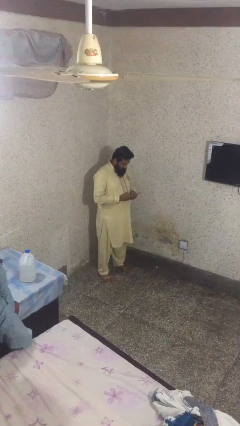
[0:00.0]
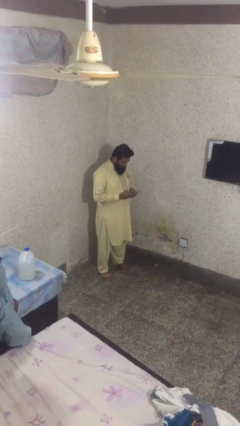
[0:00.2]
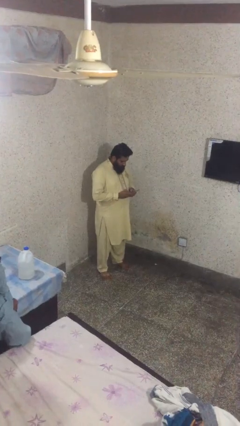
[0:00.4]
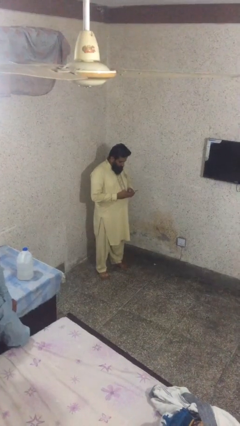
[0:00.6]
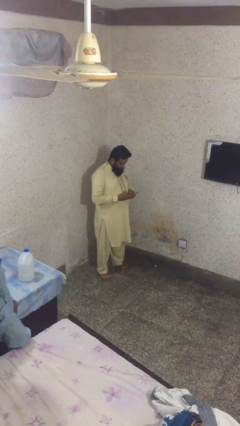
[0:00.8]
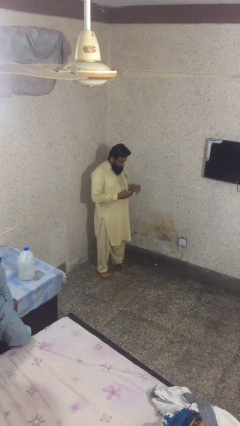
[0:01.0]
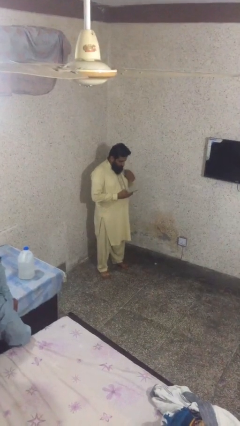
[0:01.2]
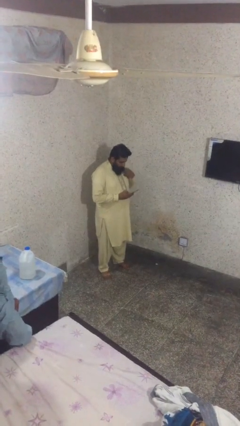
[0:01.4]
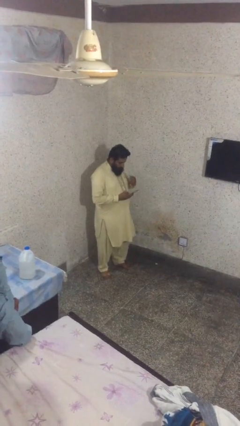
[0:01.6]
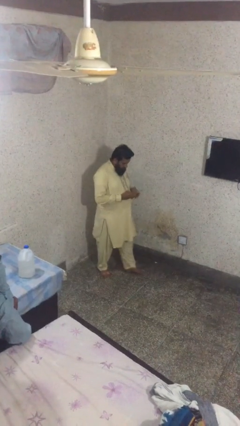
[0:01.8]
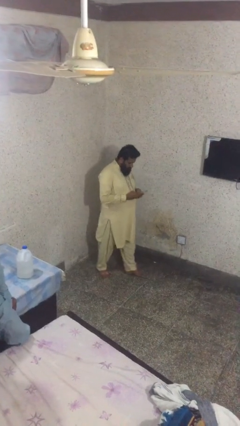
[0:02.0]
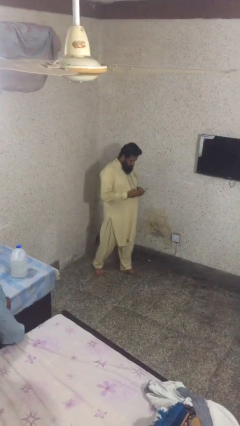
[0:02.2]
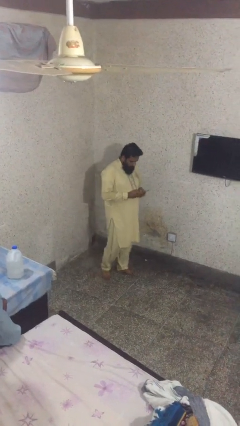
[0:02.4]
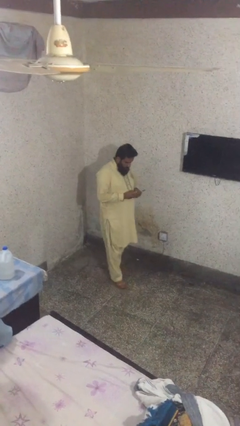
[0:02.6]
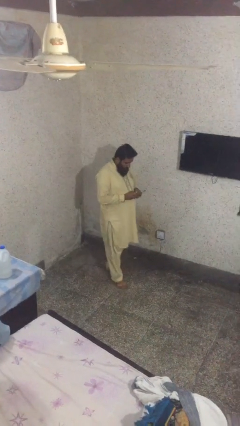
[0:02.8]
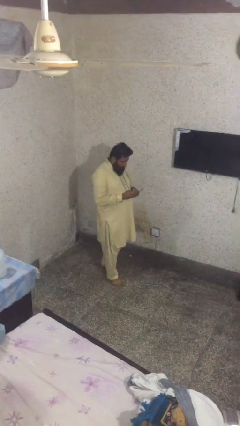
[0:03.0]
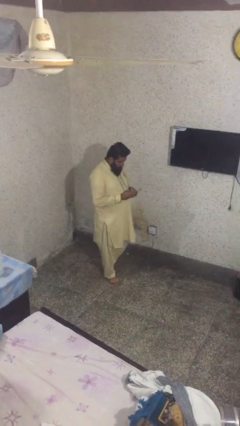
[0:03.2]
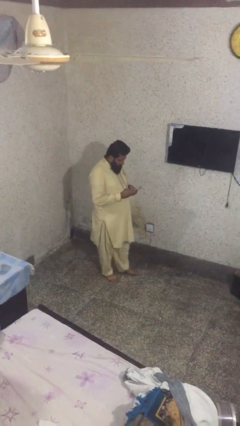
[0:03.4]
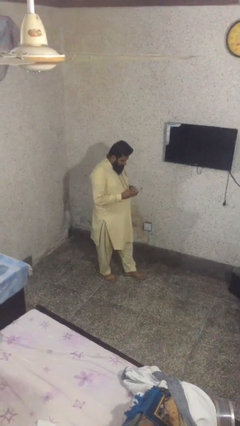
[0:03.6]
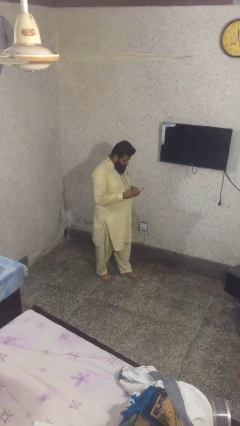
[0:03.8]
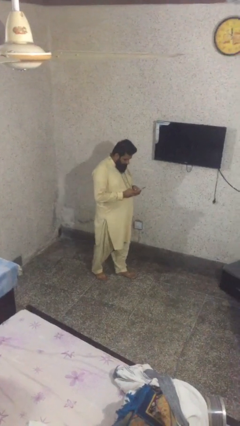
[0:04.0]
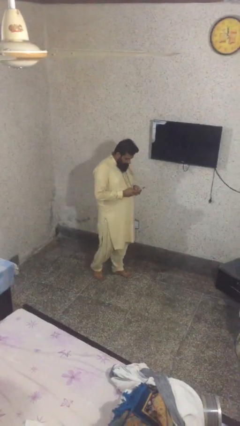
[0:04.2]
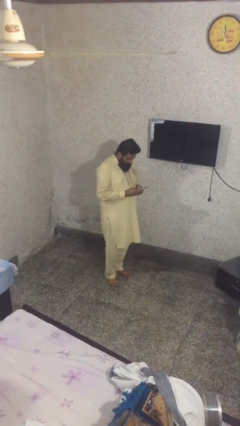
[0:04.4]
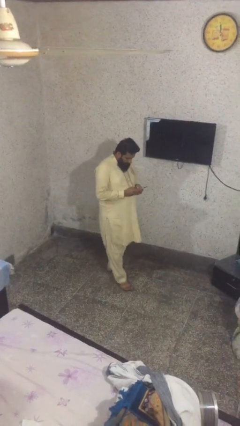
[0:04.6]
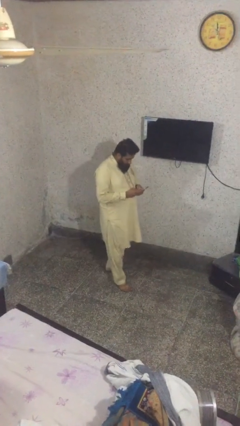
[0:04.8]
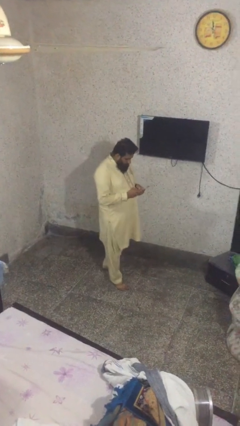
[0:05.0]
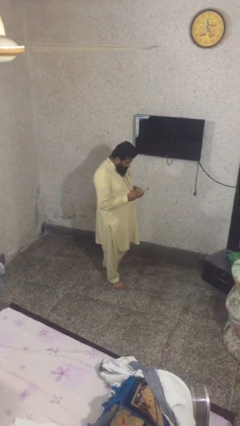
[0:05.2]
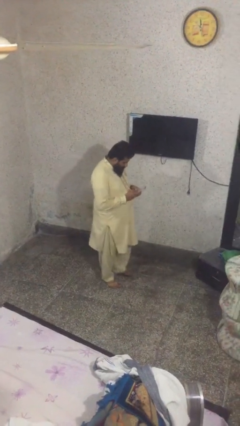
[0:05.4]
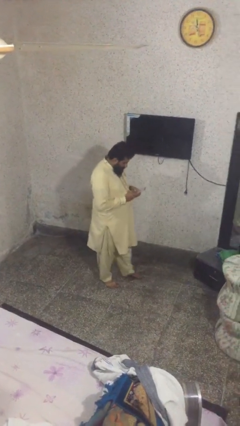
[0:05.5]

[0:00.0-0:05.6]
person texts on phone

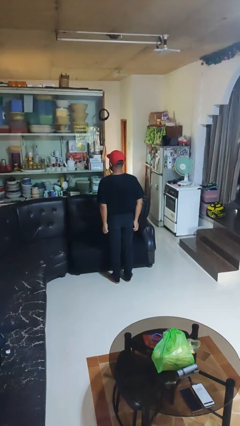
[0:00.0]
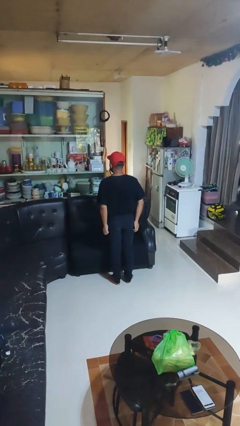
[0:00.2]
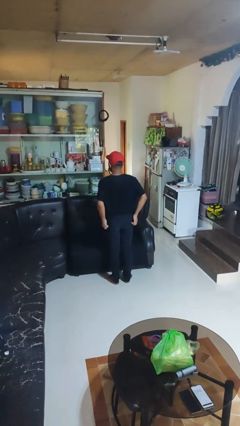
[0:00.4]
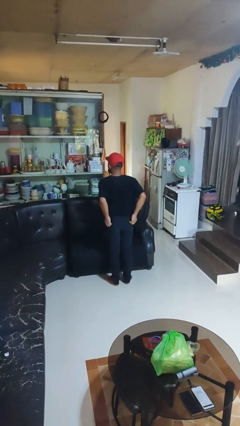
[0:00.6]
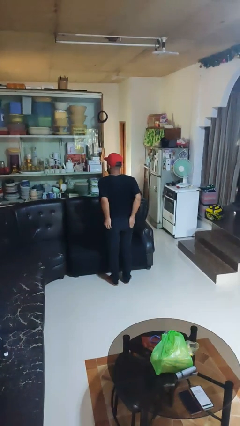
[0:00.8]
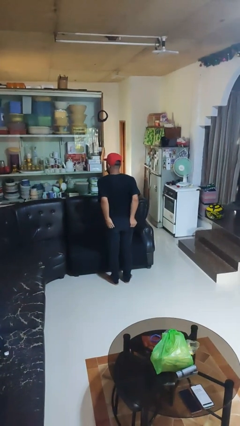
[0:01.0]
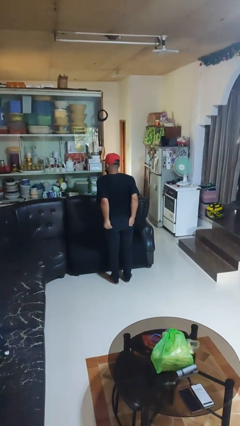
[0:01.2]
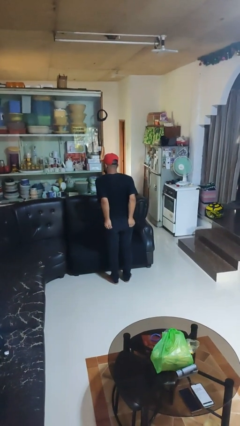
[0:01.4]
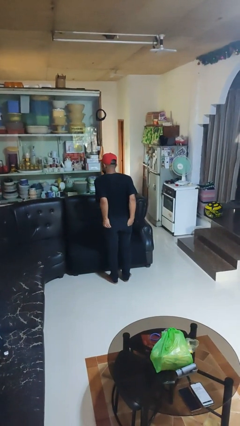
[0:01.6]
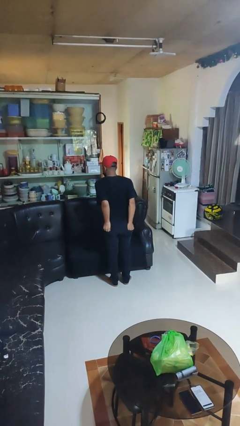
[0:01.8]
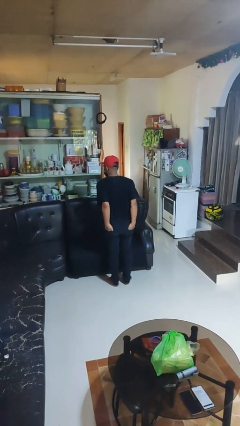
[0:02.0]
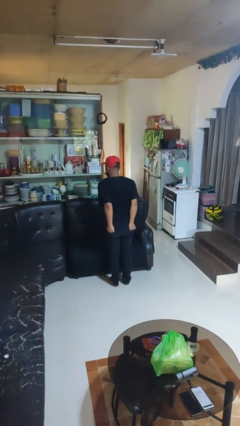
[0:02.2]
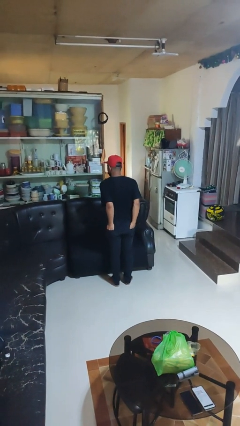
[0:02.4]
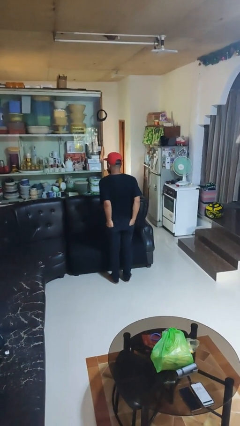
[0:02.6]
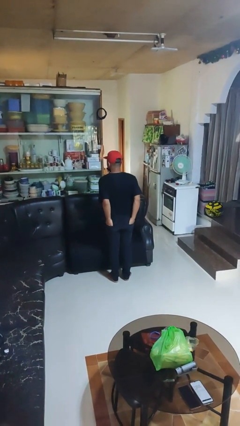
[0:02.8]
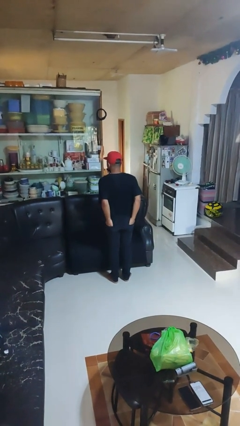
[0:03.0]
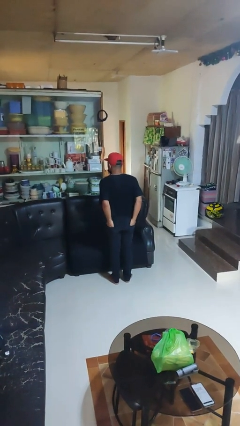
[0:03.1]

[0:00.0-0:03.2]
person puts hands in back pockets

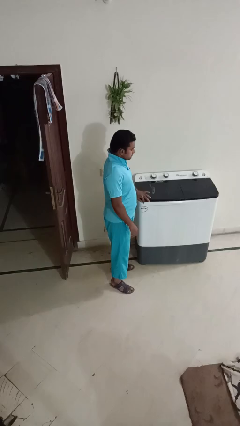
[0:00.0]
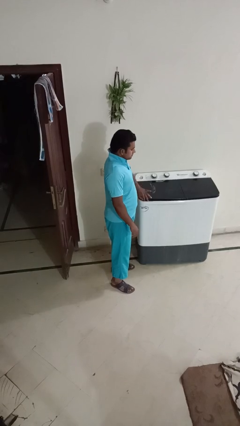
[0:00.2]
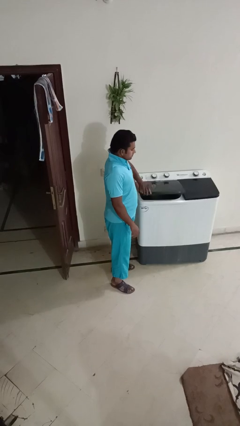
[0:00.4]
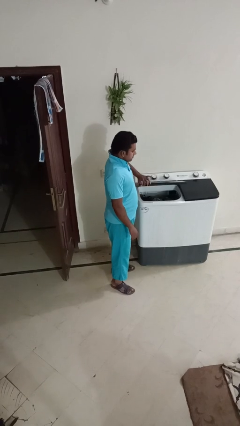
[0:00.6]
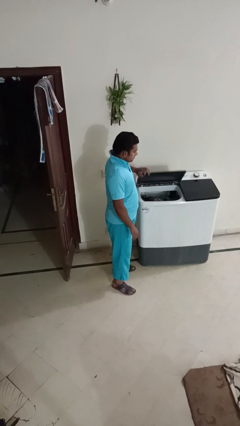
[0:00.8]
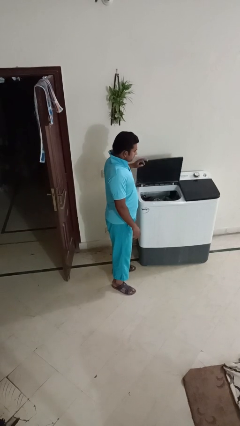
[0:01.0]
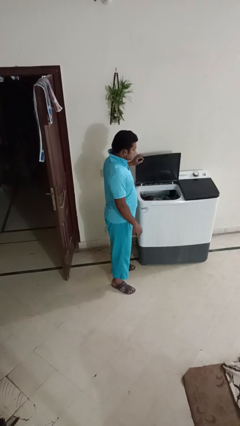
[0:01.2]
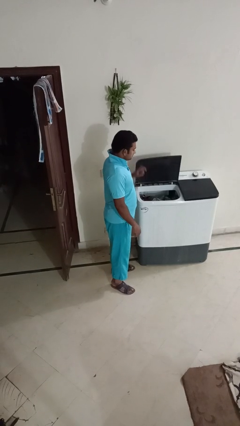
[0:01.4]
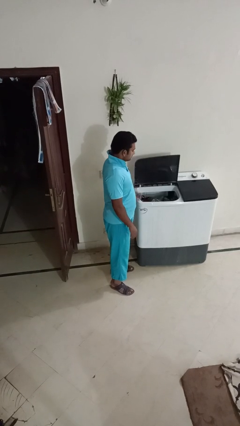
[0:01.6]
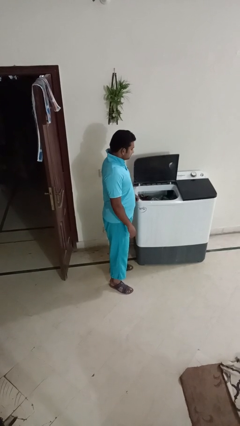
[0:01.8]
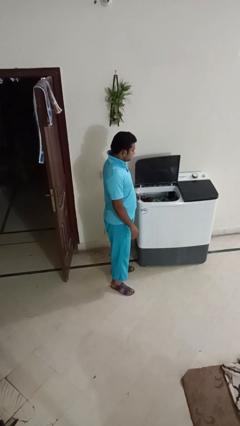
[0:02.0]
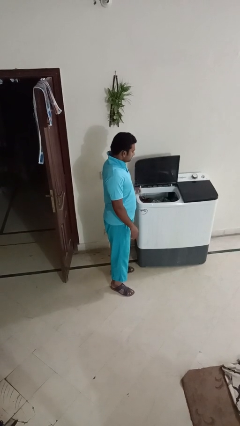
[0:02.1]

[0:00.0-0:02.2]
person opens clothes washer

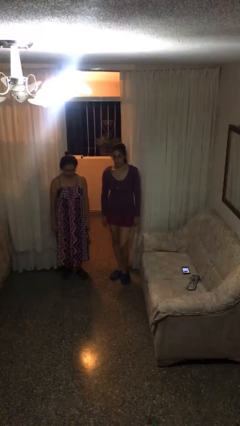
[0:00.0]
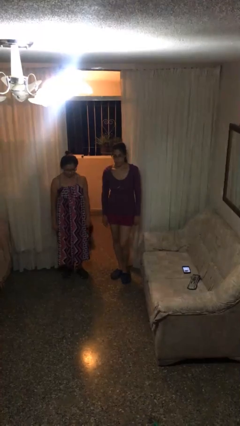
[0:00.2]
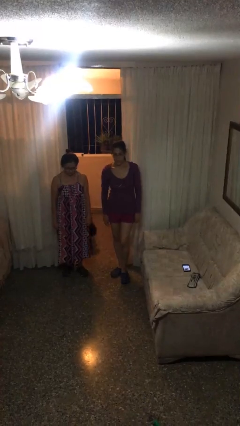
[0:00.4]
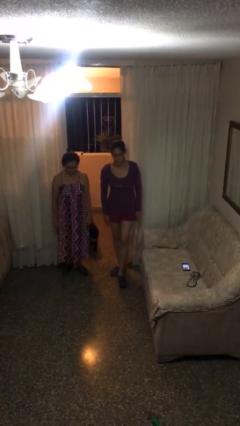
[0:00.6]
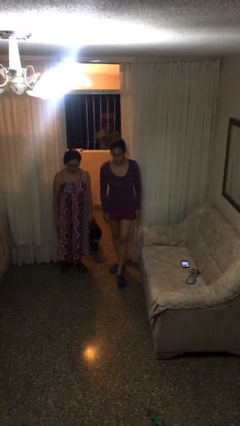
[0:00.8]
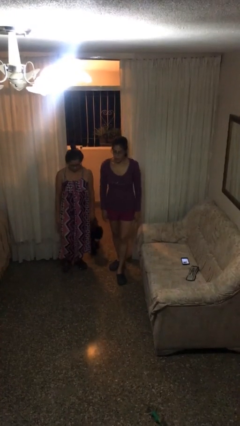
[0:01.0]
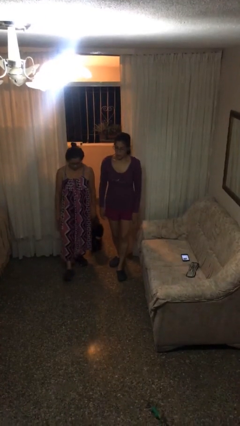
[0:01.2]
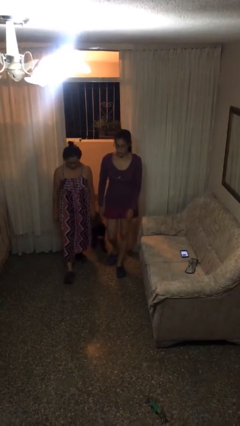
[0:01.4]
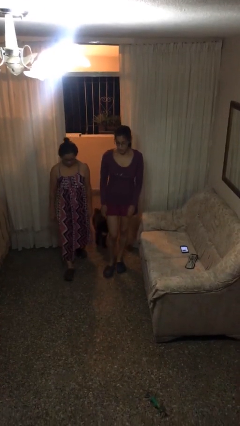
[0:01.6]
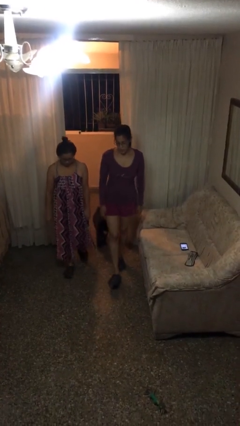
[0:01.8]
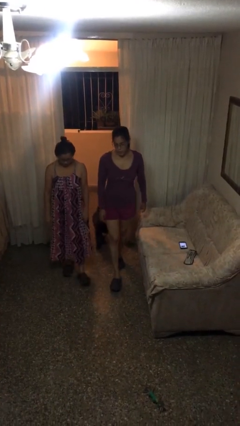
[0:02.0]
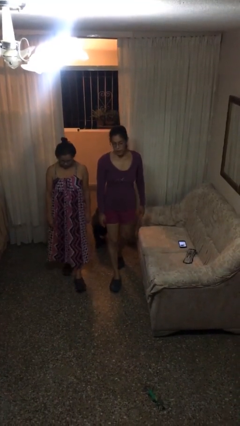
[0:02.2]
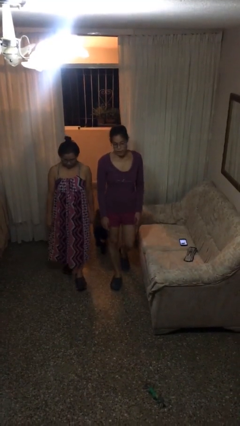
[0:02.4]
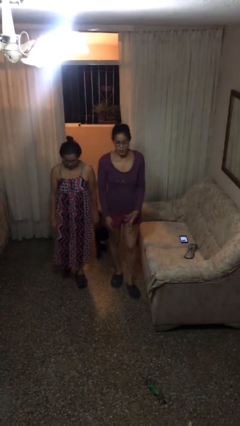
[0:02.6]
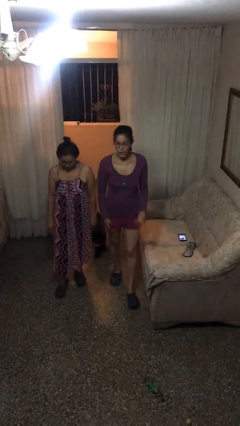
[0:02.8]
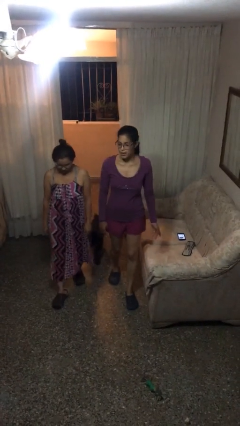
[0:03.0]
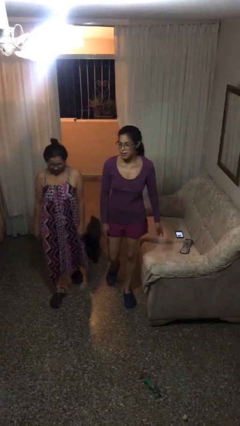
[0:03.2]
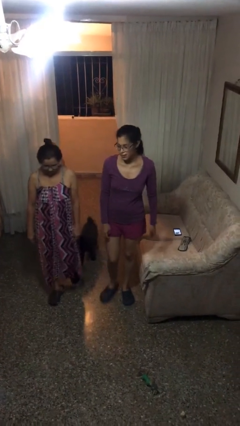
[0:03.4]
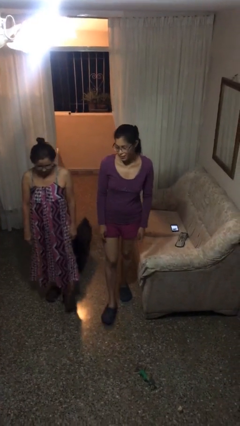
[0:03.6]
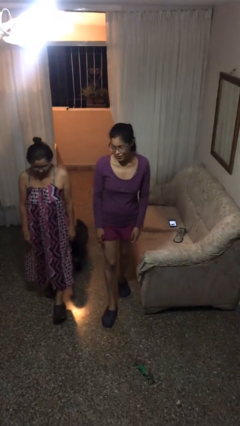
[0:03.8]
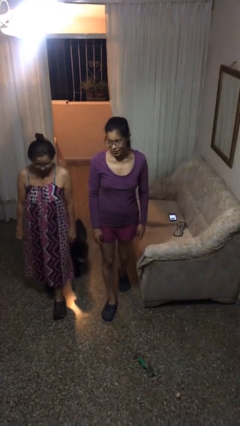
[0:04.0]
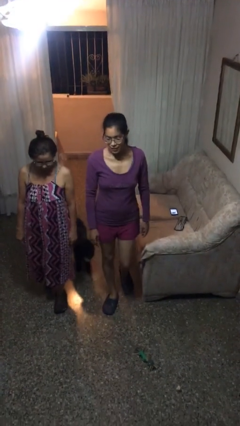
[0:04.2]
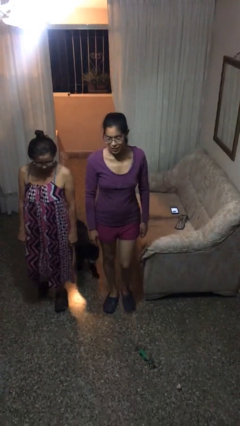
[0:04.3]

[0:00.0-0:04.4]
person talks to person

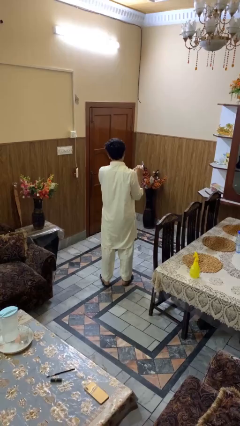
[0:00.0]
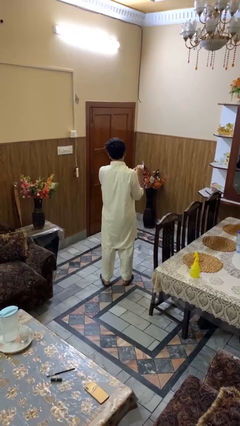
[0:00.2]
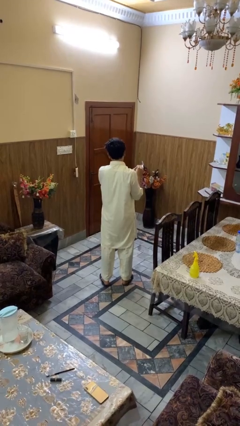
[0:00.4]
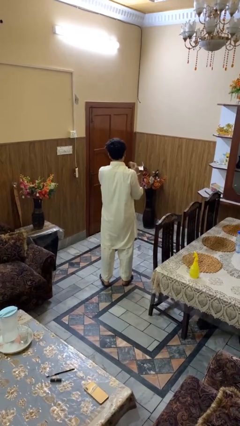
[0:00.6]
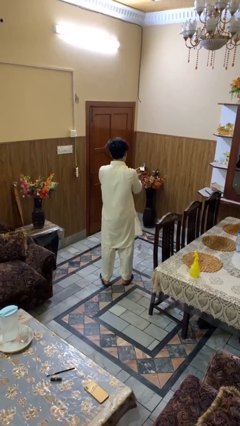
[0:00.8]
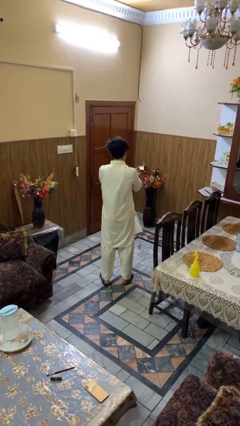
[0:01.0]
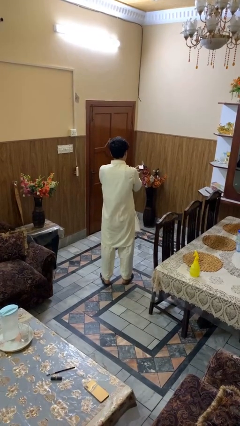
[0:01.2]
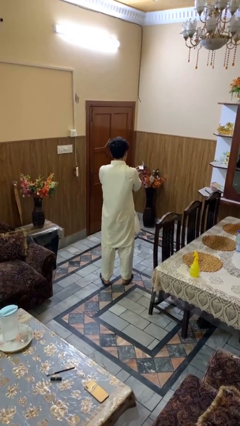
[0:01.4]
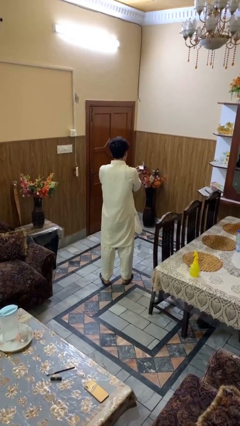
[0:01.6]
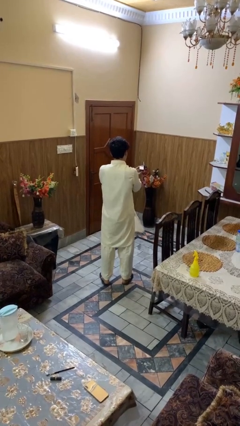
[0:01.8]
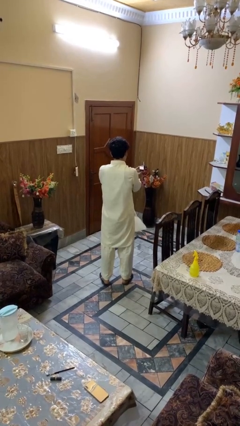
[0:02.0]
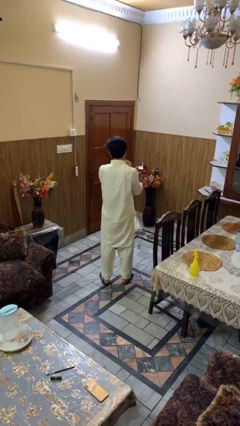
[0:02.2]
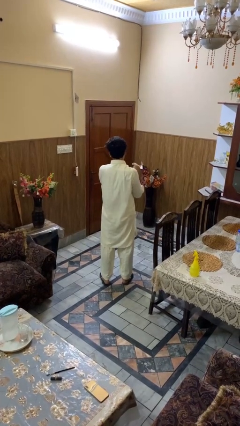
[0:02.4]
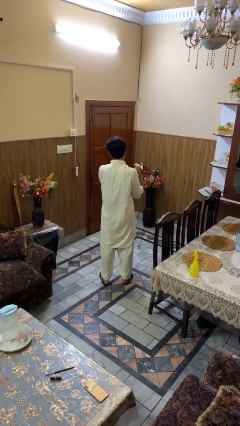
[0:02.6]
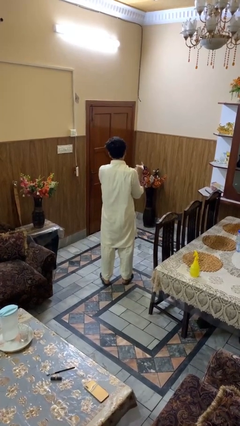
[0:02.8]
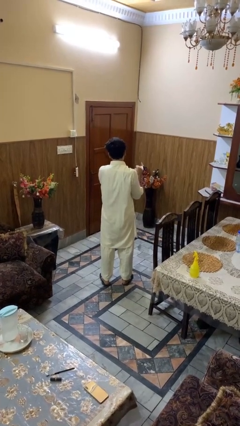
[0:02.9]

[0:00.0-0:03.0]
person applies foundation makeup
